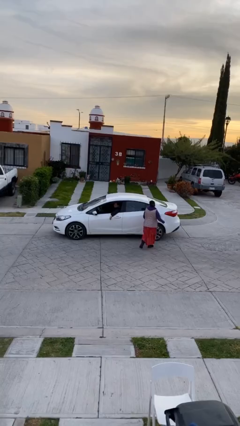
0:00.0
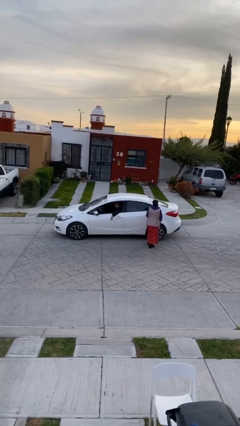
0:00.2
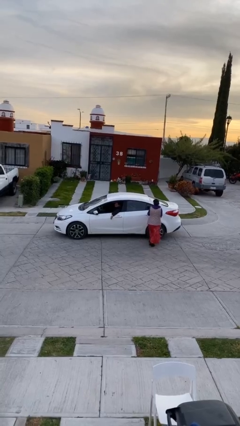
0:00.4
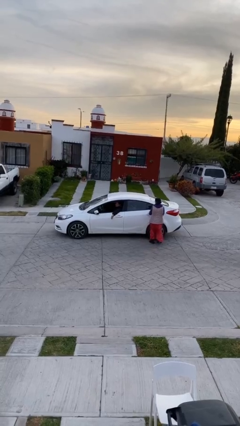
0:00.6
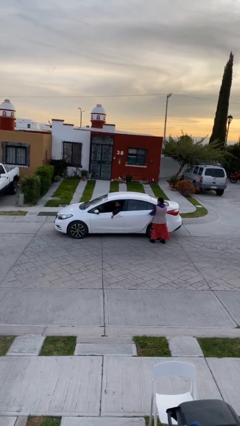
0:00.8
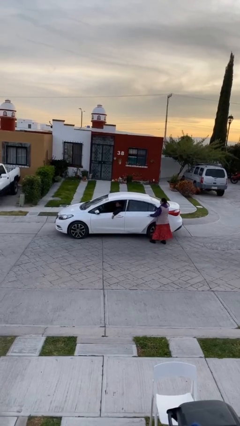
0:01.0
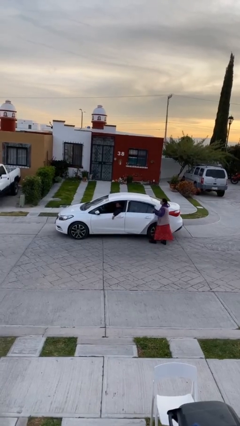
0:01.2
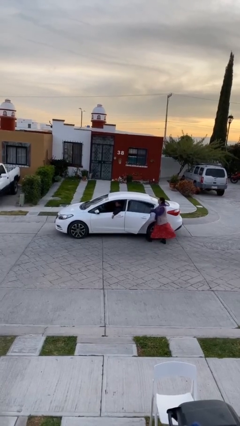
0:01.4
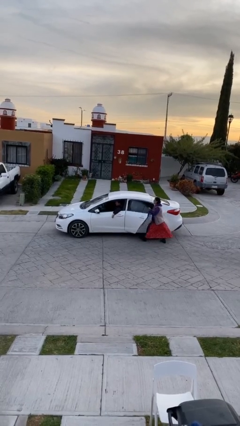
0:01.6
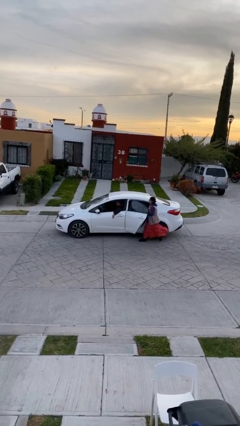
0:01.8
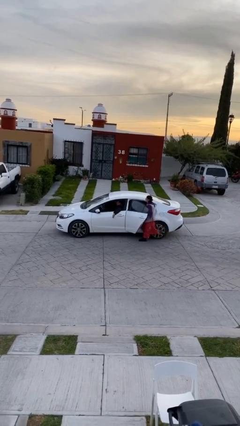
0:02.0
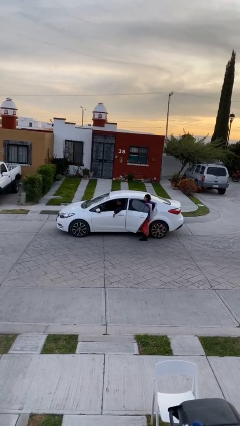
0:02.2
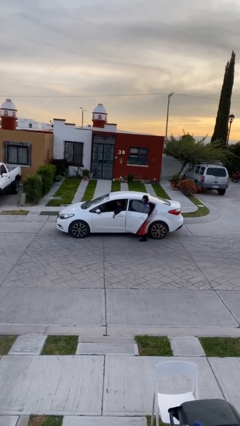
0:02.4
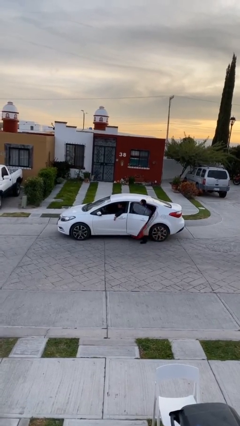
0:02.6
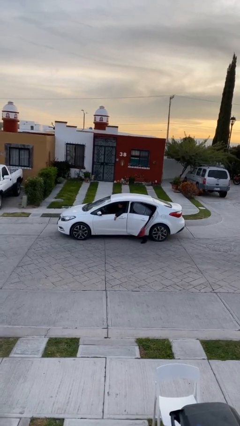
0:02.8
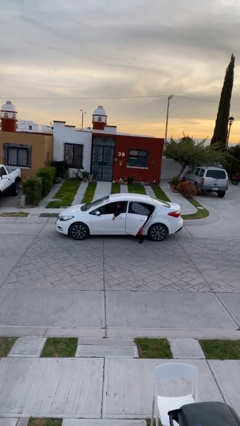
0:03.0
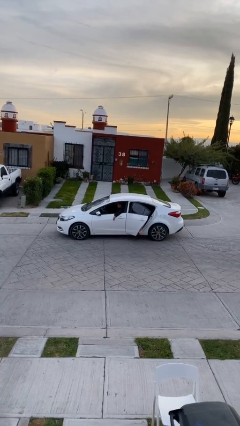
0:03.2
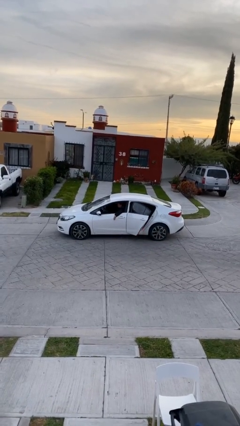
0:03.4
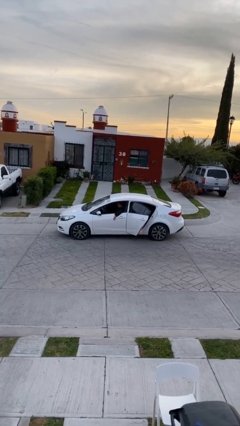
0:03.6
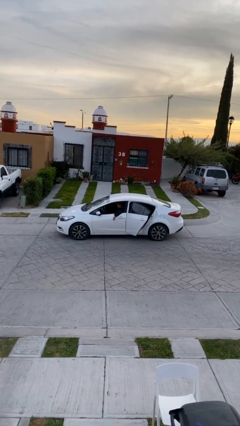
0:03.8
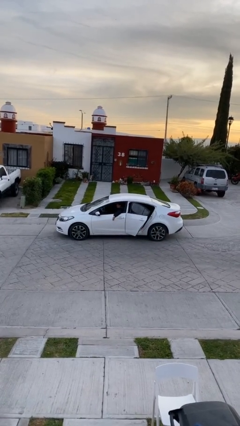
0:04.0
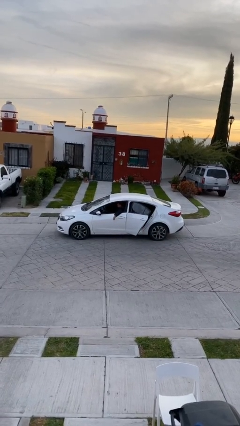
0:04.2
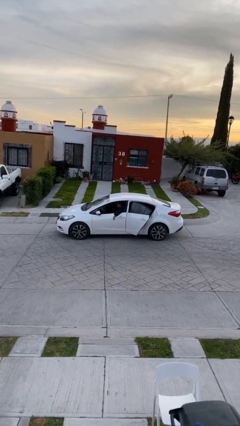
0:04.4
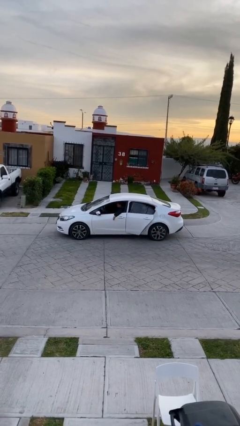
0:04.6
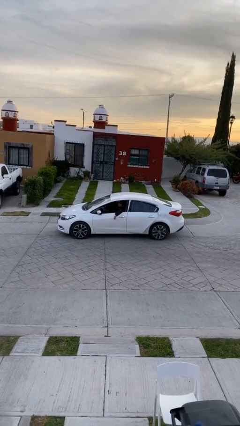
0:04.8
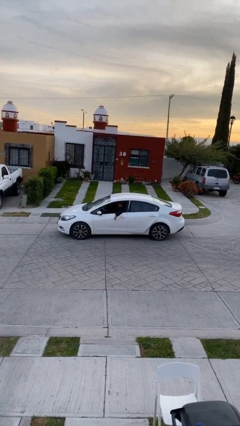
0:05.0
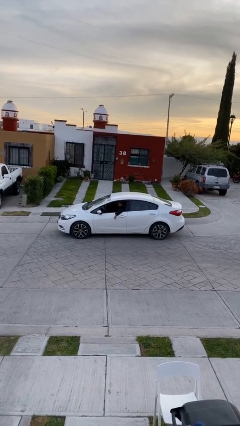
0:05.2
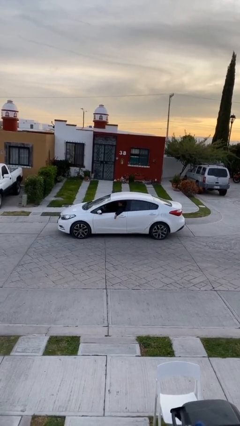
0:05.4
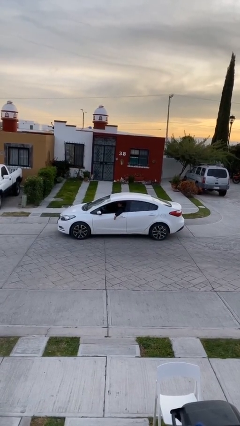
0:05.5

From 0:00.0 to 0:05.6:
car picks up person

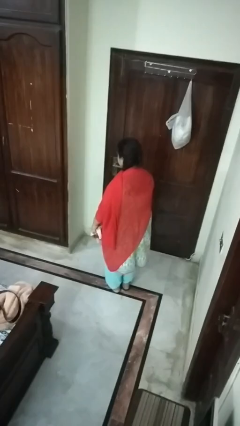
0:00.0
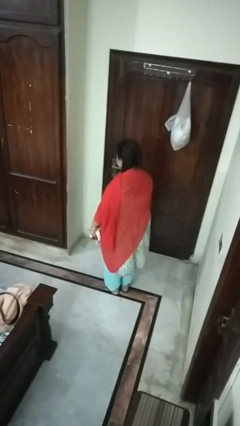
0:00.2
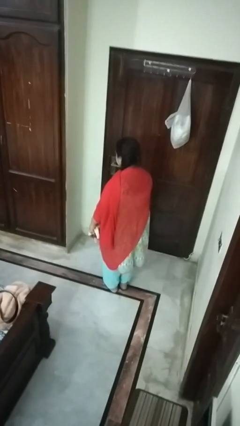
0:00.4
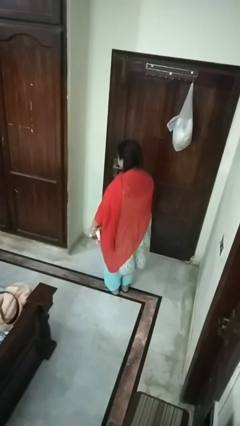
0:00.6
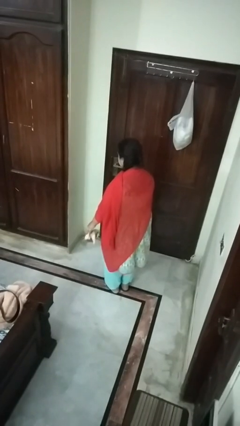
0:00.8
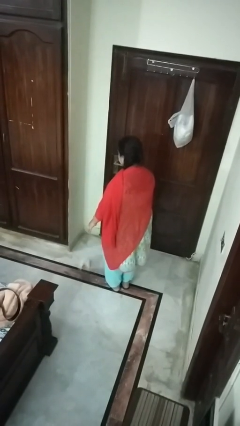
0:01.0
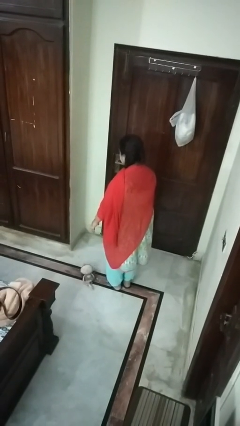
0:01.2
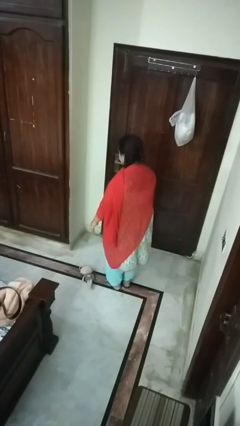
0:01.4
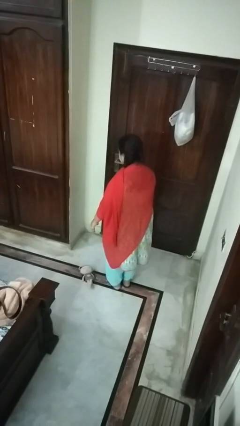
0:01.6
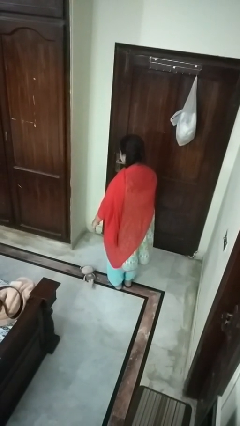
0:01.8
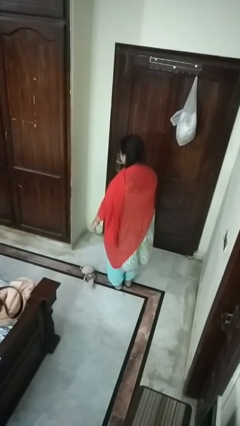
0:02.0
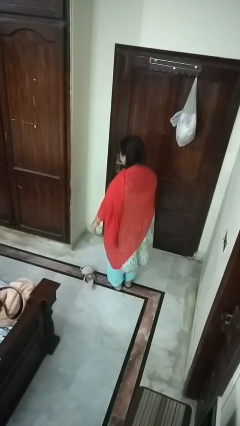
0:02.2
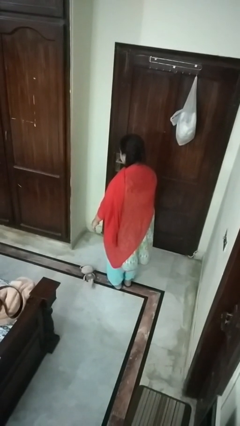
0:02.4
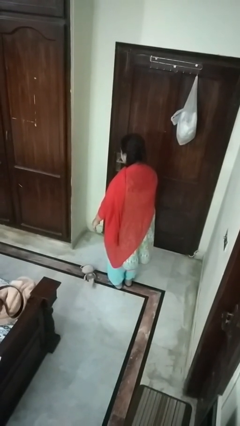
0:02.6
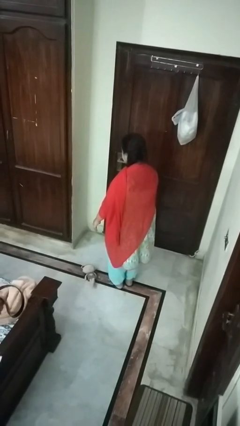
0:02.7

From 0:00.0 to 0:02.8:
person drops object

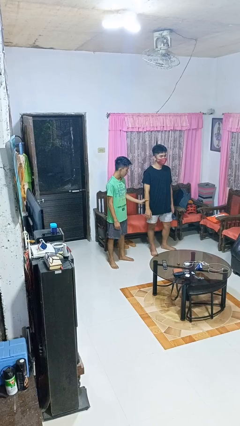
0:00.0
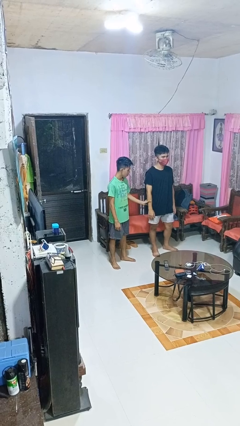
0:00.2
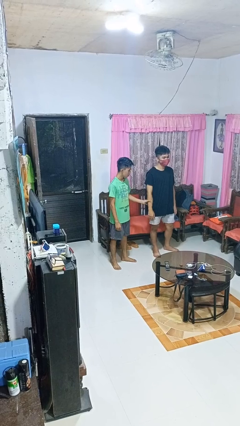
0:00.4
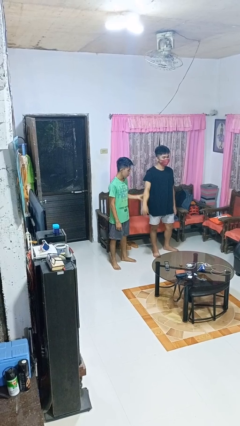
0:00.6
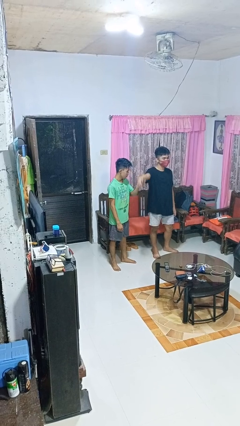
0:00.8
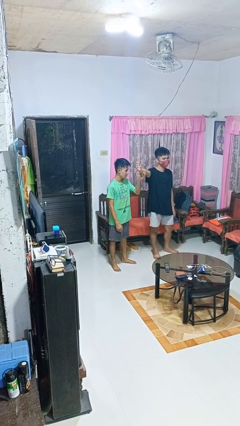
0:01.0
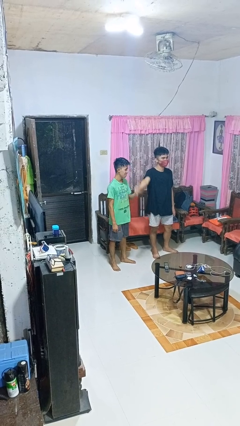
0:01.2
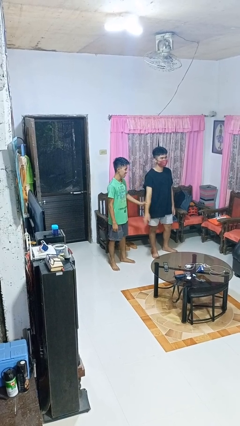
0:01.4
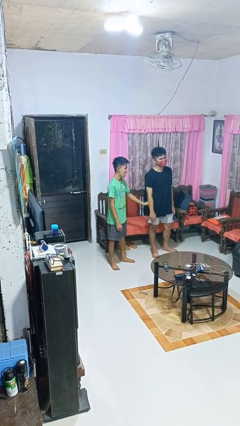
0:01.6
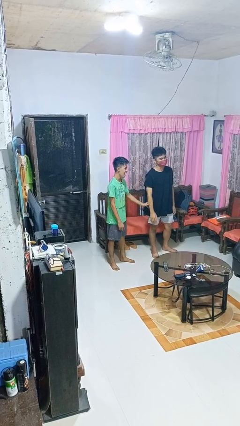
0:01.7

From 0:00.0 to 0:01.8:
person grabs person by forearm

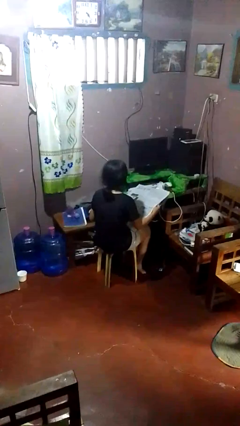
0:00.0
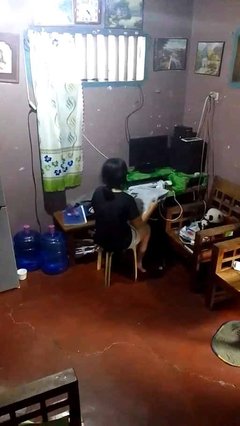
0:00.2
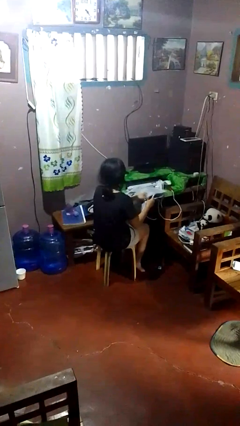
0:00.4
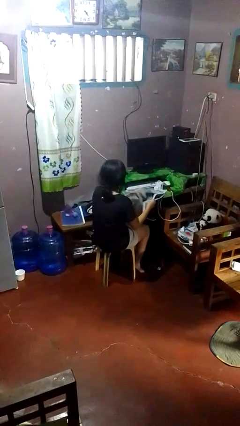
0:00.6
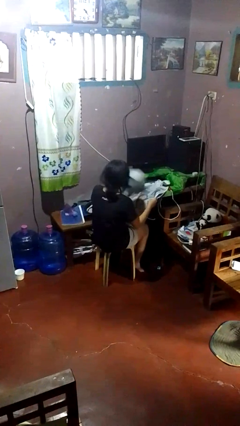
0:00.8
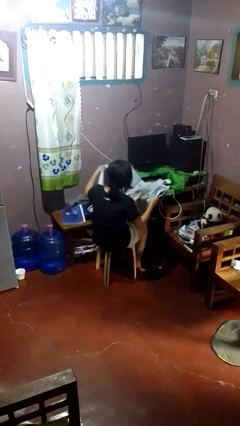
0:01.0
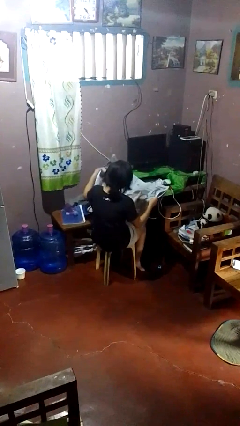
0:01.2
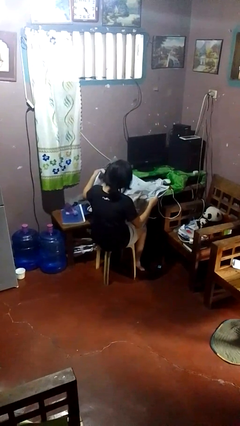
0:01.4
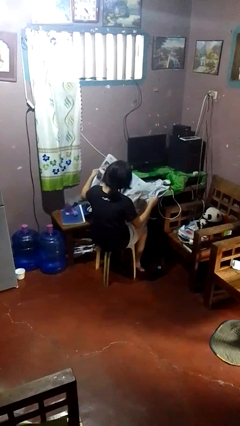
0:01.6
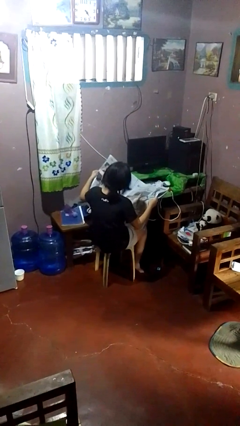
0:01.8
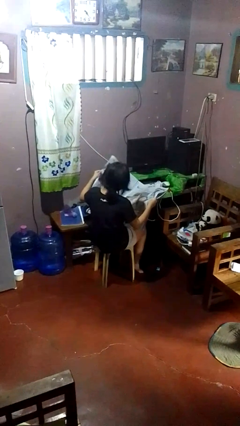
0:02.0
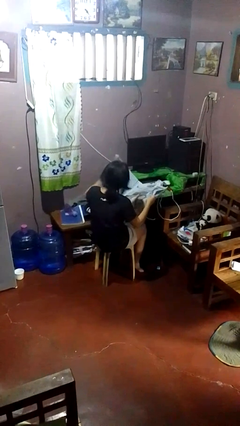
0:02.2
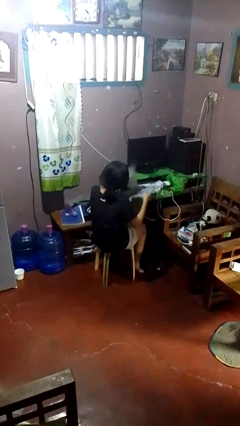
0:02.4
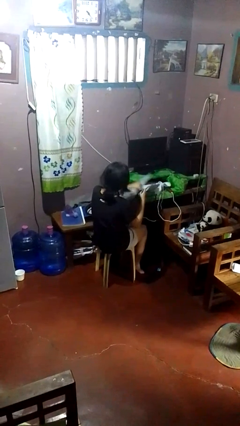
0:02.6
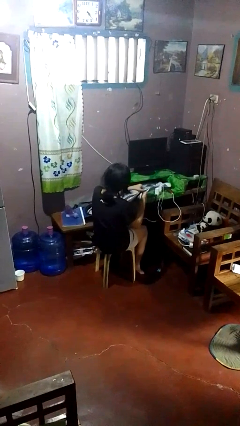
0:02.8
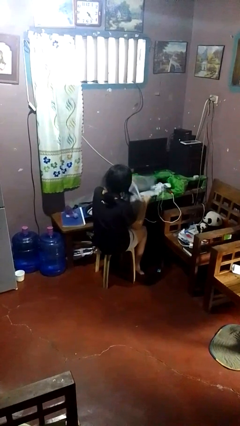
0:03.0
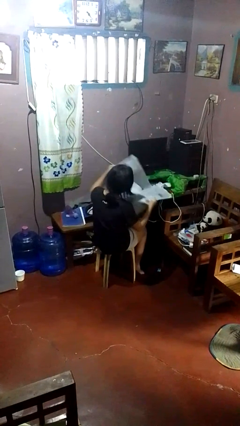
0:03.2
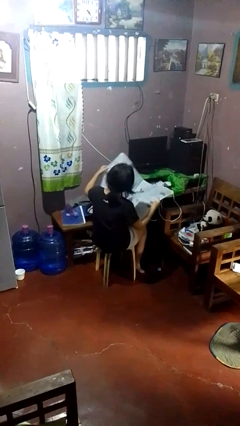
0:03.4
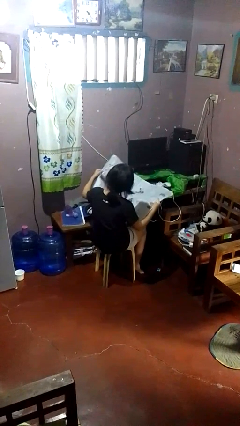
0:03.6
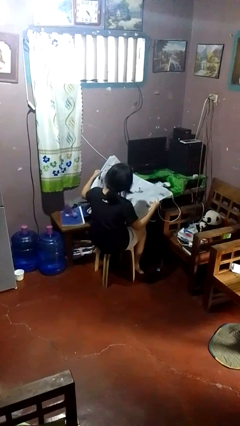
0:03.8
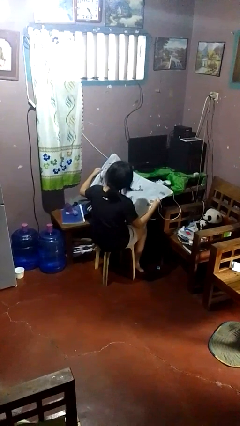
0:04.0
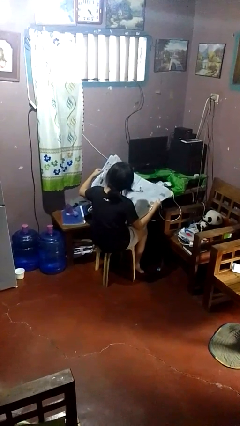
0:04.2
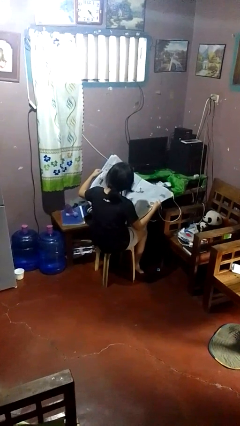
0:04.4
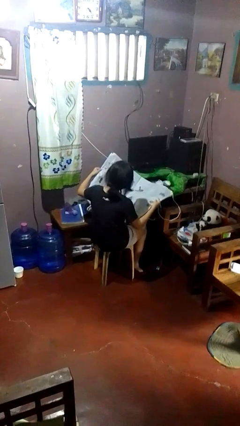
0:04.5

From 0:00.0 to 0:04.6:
person reads newspaper

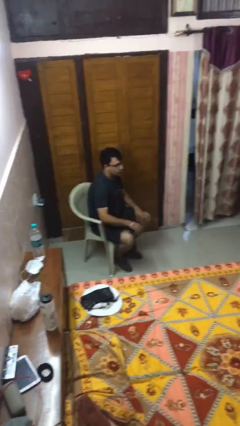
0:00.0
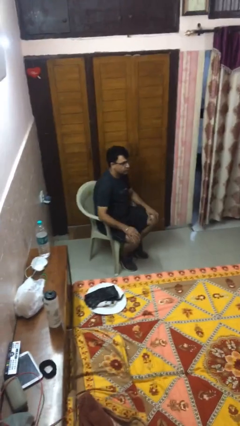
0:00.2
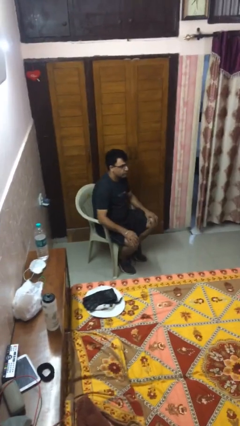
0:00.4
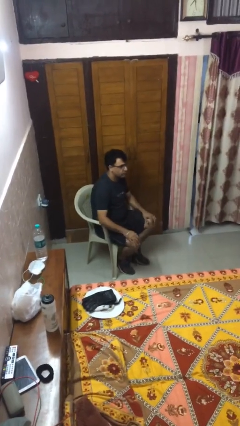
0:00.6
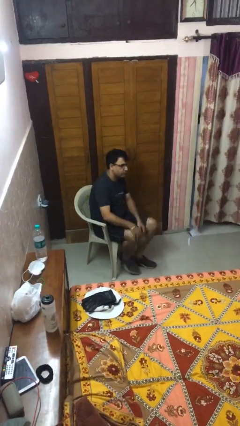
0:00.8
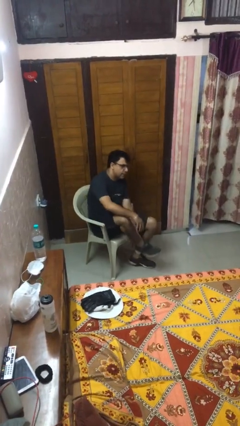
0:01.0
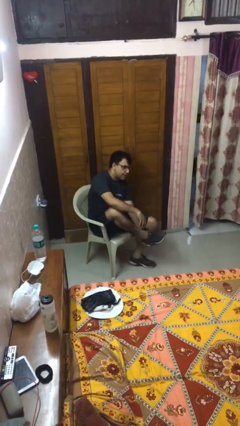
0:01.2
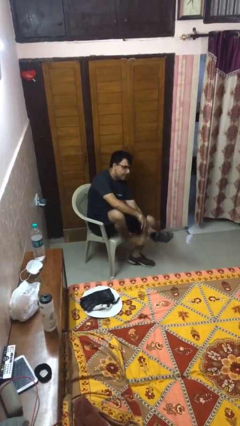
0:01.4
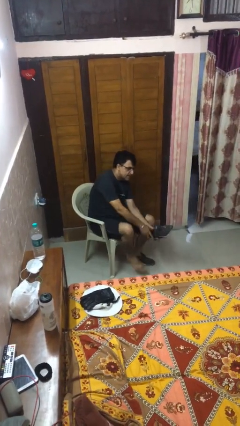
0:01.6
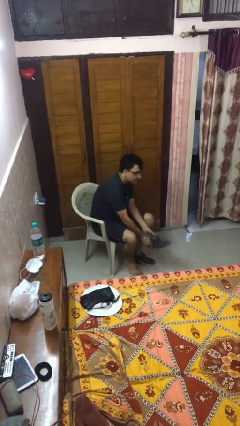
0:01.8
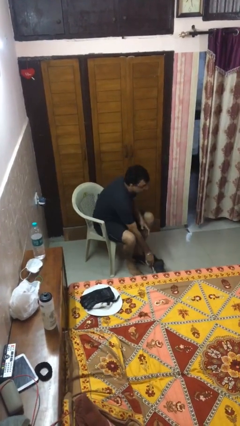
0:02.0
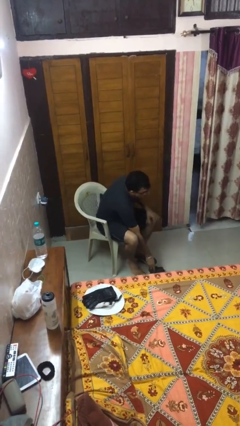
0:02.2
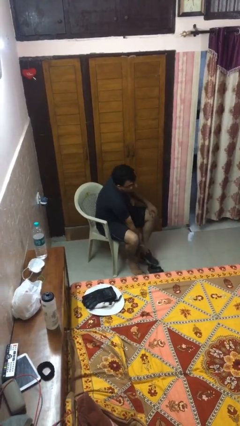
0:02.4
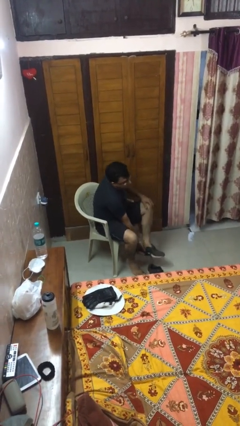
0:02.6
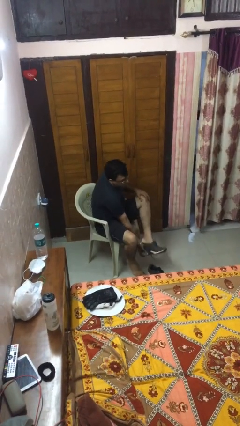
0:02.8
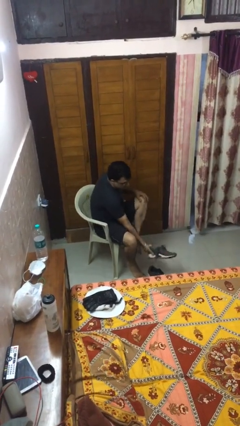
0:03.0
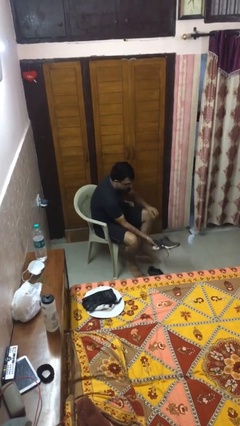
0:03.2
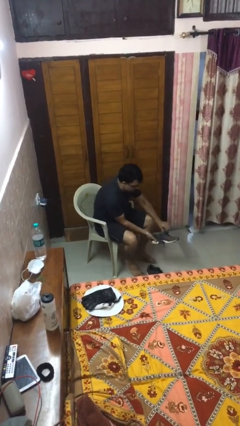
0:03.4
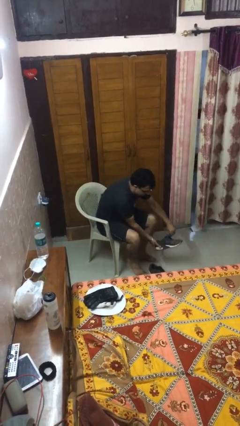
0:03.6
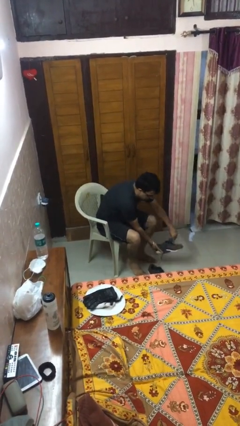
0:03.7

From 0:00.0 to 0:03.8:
person takes off shoes
